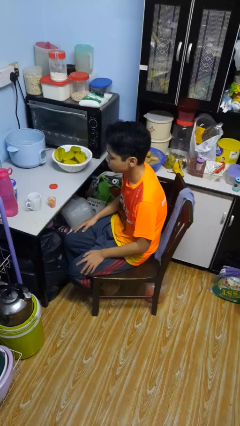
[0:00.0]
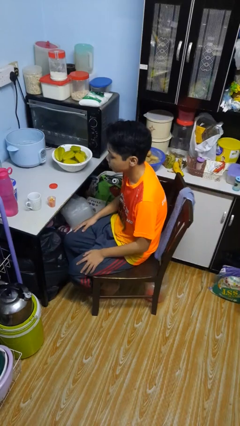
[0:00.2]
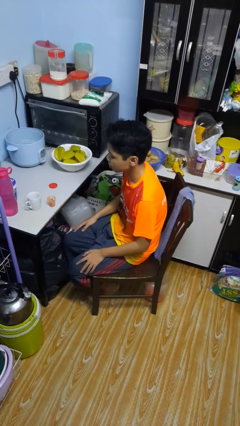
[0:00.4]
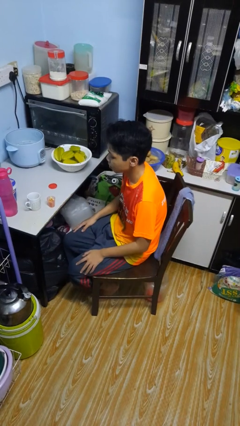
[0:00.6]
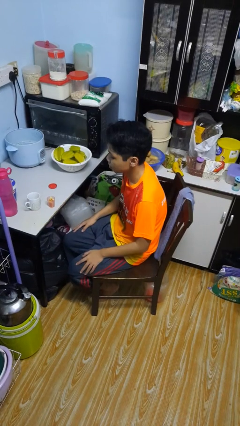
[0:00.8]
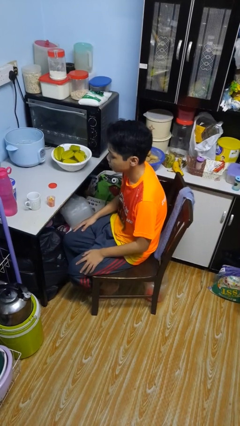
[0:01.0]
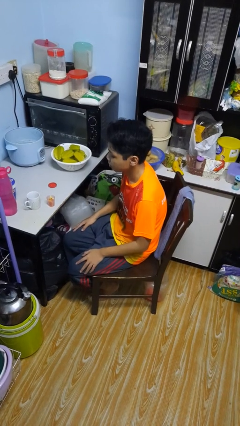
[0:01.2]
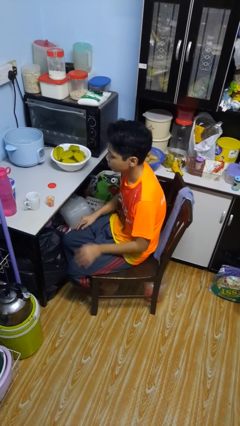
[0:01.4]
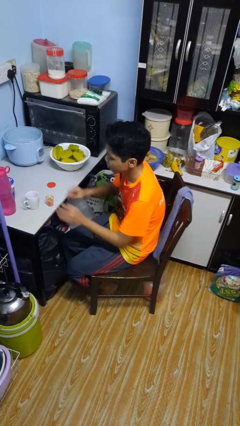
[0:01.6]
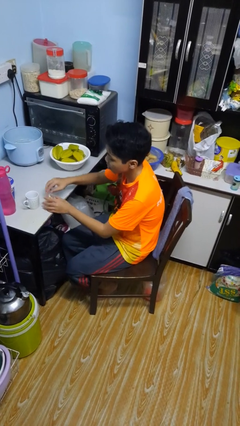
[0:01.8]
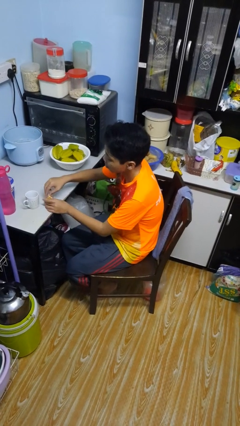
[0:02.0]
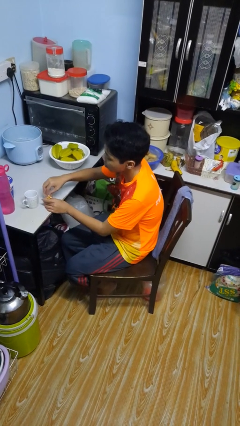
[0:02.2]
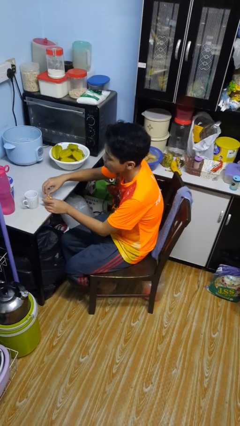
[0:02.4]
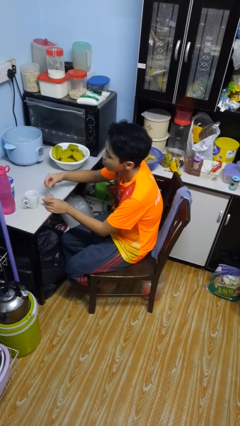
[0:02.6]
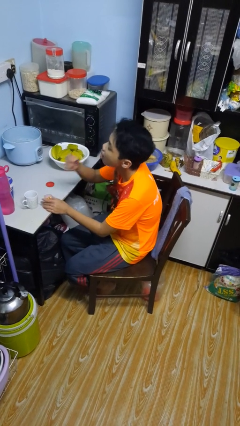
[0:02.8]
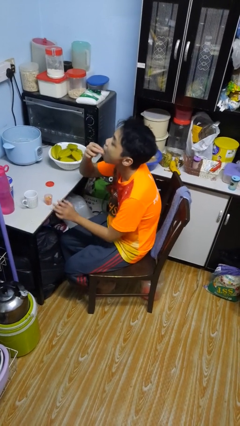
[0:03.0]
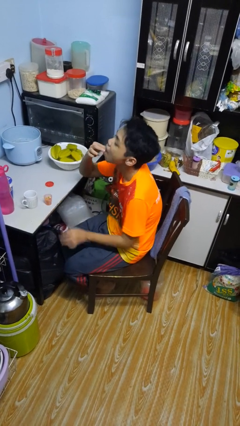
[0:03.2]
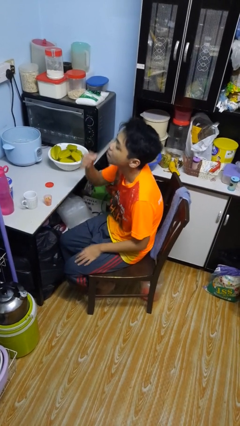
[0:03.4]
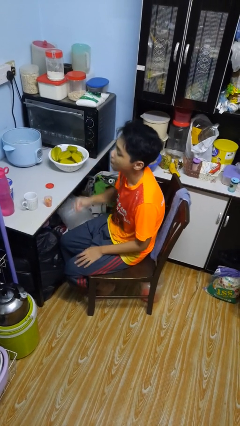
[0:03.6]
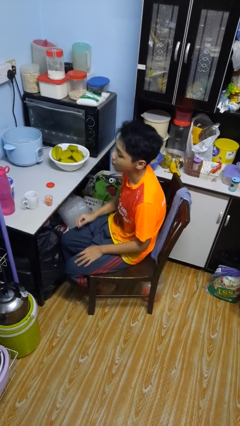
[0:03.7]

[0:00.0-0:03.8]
person takes medicine pills

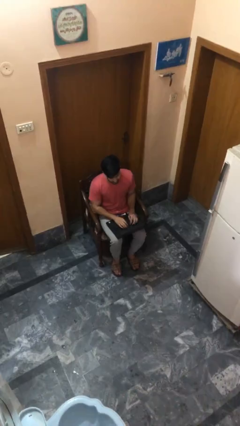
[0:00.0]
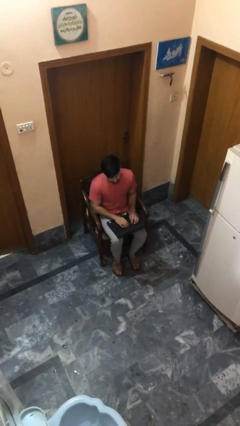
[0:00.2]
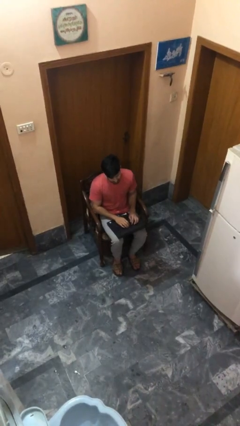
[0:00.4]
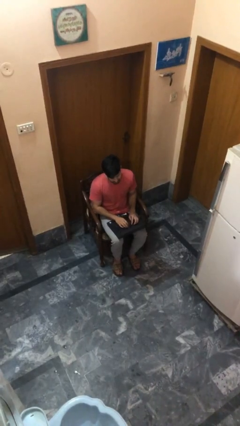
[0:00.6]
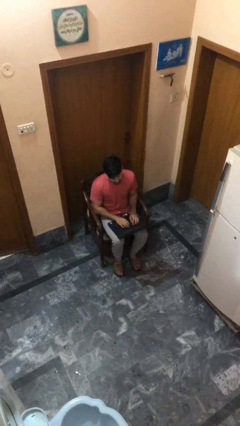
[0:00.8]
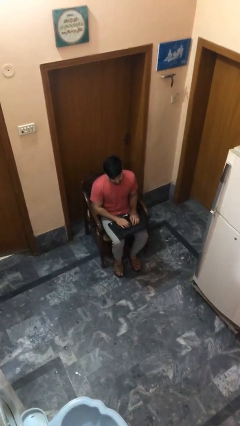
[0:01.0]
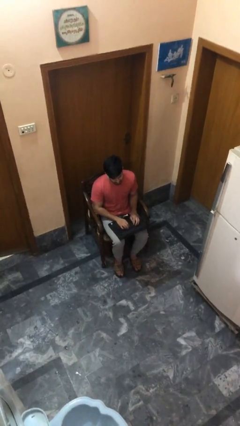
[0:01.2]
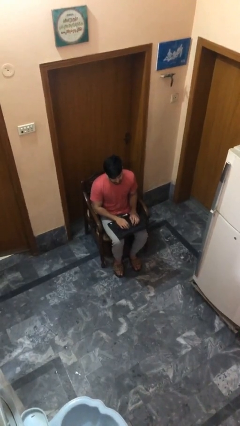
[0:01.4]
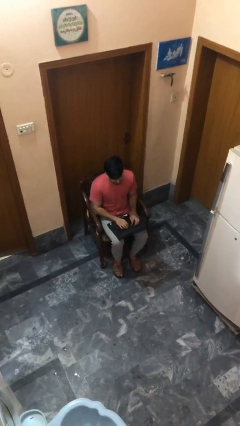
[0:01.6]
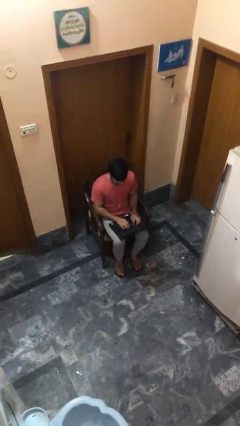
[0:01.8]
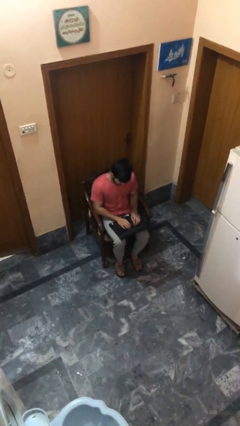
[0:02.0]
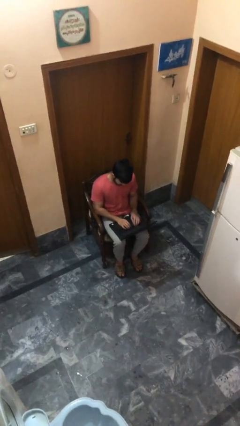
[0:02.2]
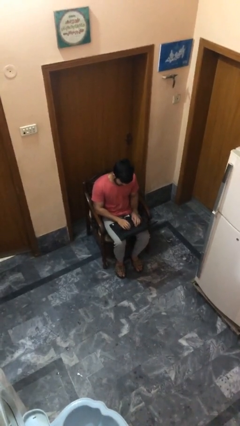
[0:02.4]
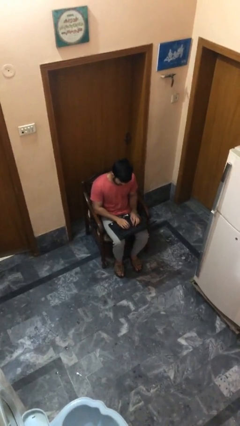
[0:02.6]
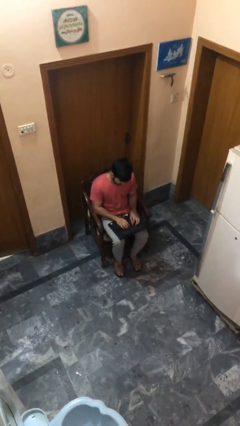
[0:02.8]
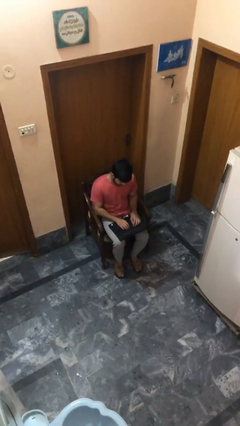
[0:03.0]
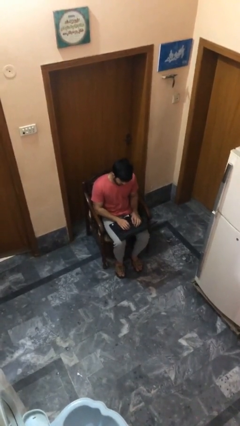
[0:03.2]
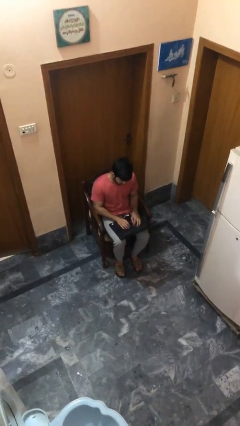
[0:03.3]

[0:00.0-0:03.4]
person interacts with laptop

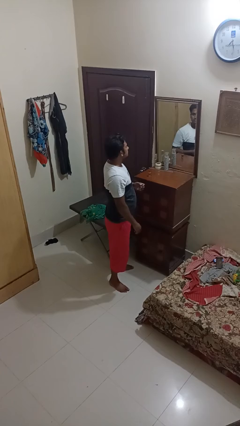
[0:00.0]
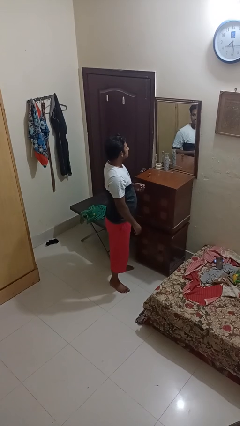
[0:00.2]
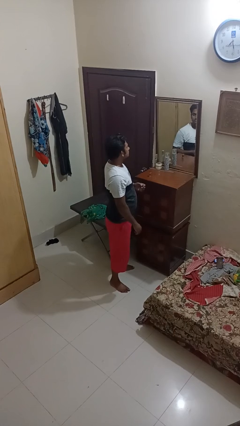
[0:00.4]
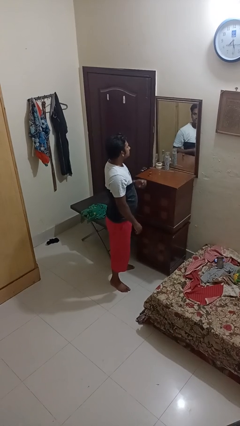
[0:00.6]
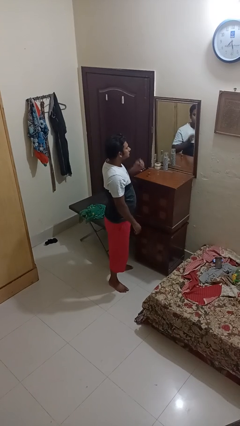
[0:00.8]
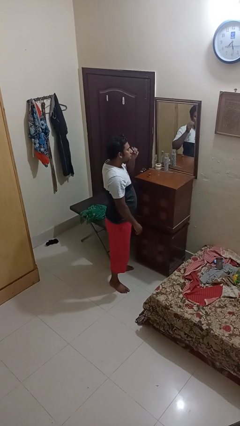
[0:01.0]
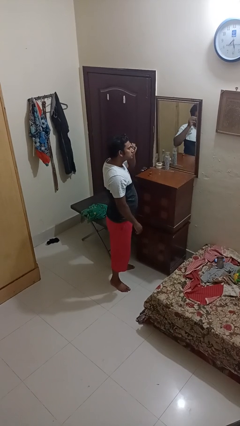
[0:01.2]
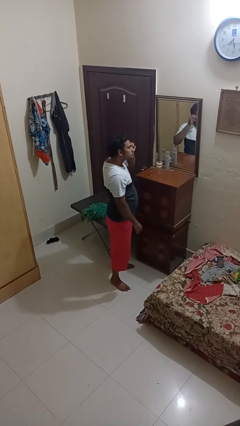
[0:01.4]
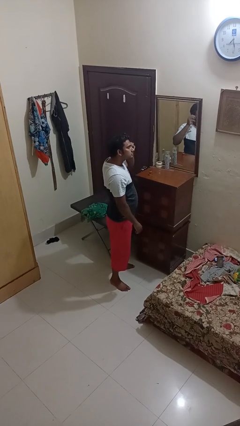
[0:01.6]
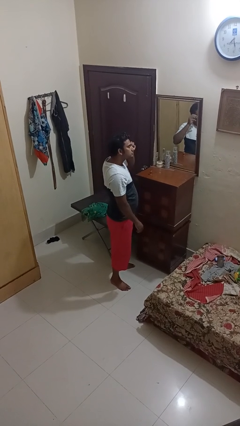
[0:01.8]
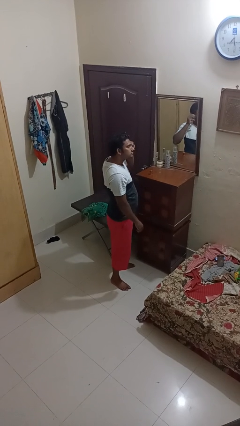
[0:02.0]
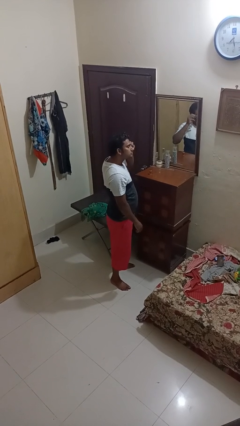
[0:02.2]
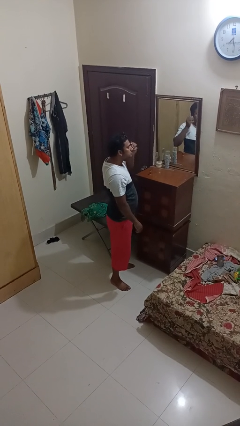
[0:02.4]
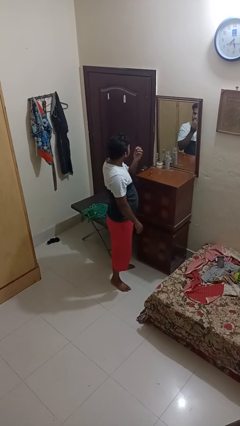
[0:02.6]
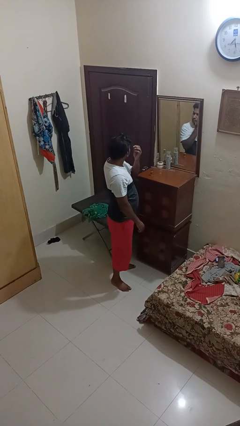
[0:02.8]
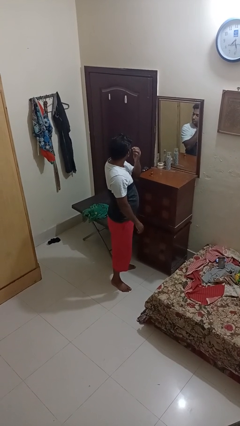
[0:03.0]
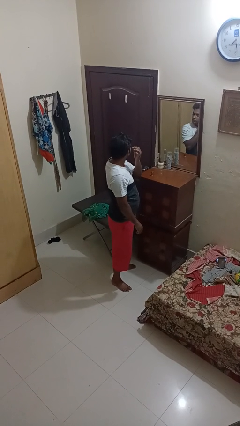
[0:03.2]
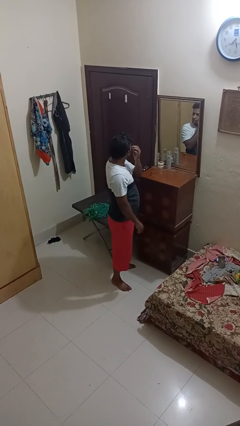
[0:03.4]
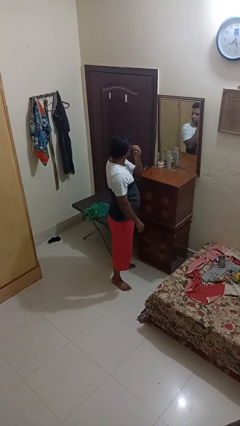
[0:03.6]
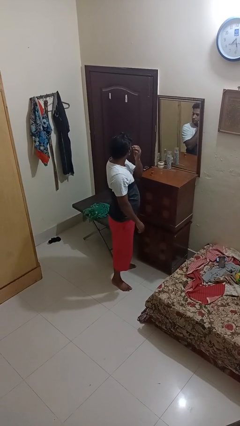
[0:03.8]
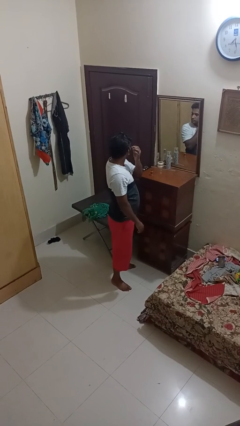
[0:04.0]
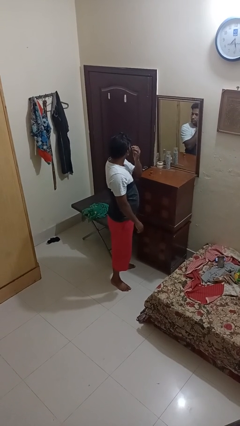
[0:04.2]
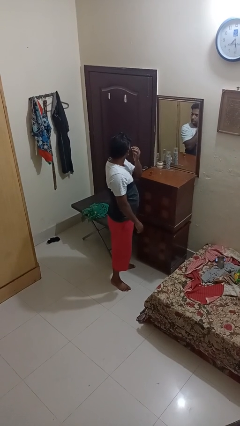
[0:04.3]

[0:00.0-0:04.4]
person applies eye makeup

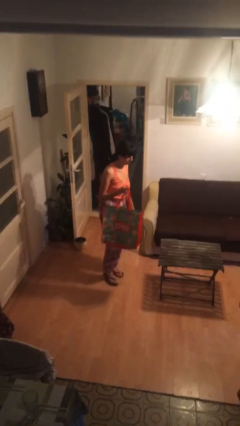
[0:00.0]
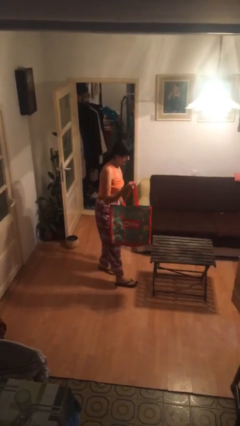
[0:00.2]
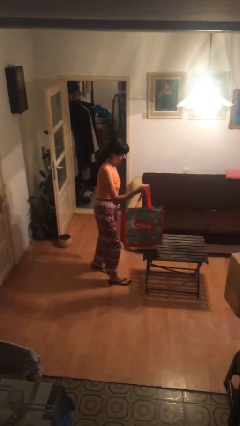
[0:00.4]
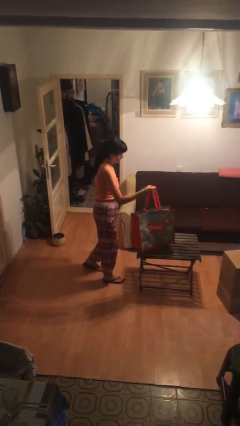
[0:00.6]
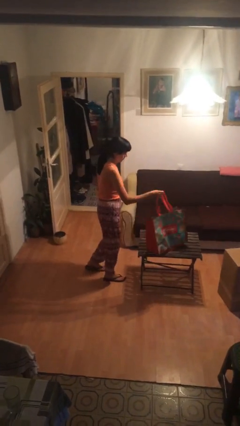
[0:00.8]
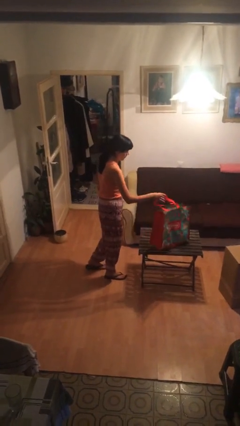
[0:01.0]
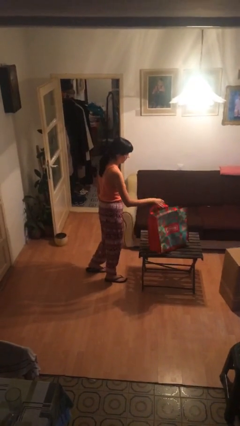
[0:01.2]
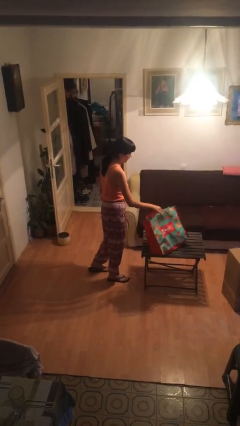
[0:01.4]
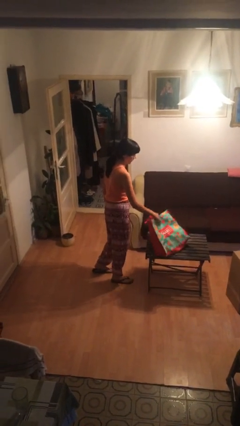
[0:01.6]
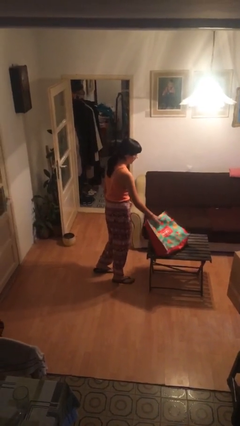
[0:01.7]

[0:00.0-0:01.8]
person puts down object on table

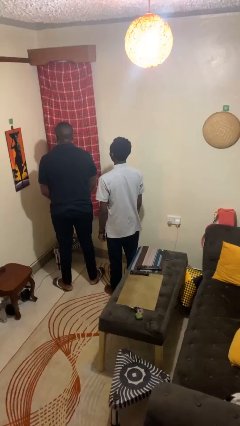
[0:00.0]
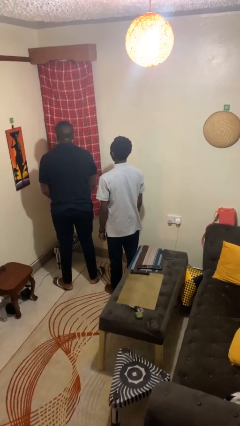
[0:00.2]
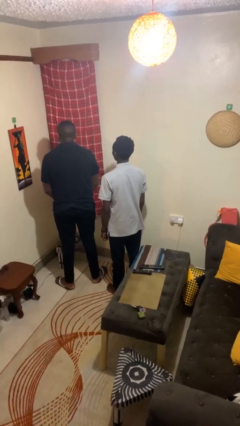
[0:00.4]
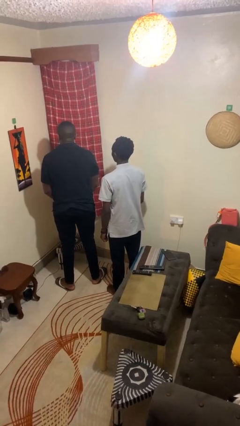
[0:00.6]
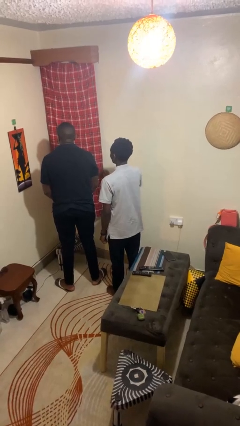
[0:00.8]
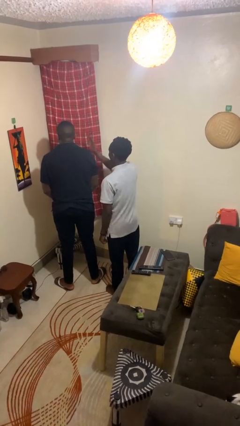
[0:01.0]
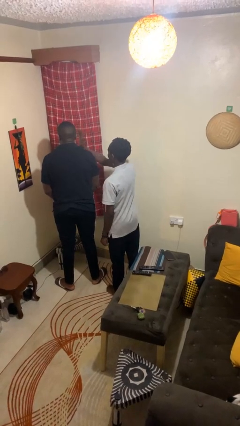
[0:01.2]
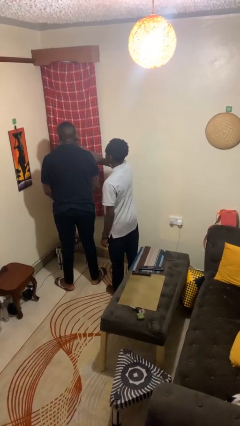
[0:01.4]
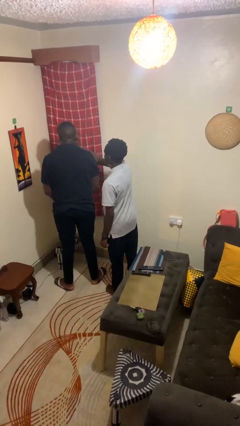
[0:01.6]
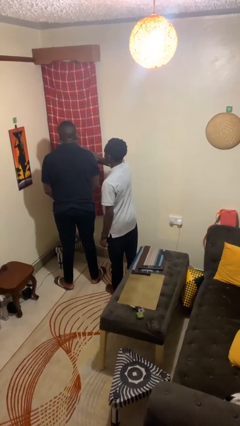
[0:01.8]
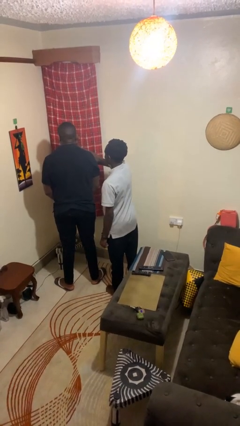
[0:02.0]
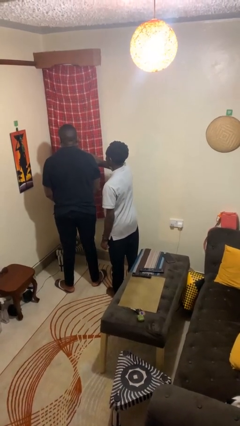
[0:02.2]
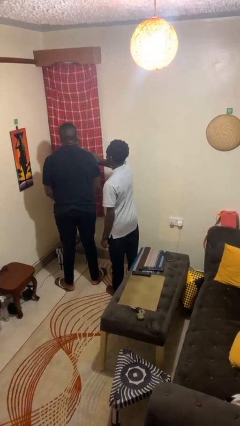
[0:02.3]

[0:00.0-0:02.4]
person touches face of person

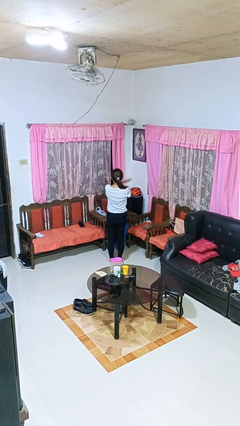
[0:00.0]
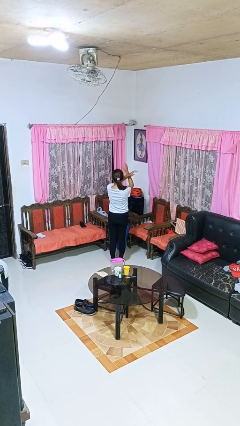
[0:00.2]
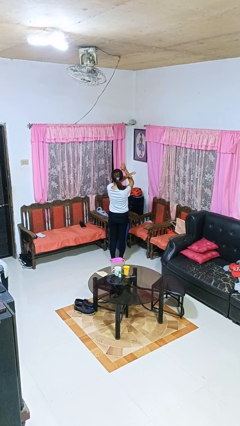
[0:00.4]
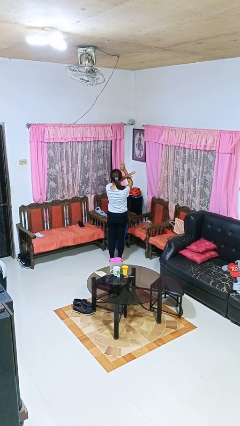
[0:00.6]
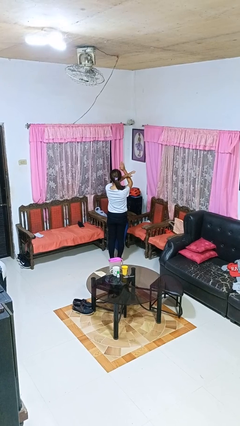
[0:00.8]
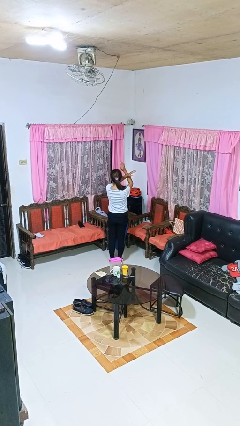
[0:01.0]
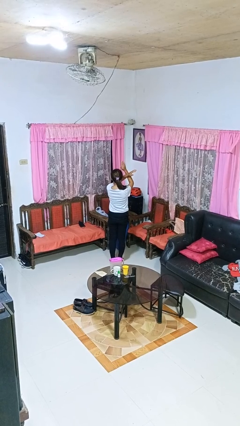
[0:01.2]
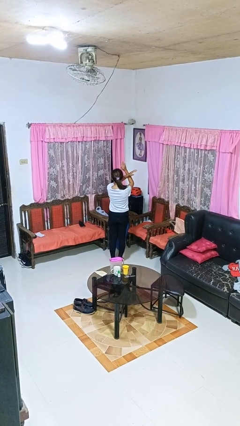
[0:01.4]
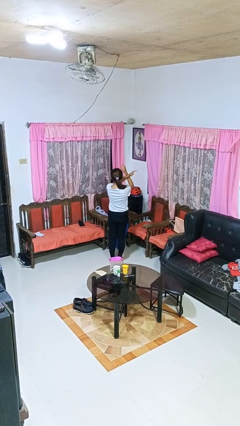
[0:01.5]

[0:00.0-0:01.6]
person gestures arms x
